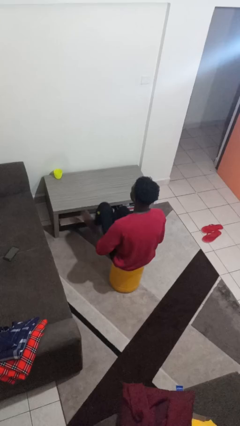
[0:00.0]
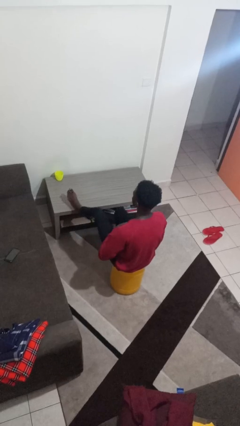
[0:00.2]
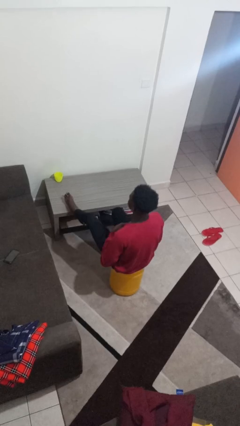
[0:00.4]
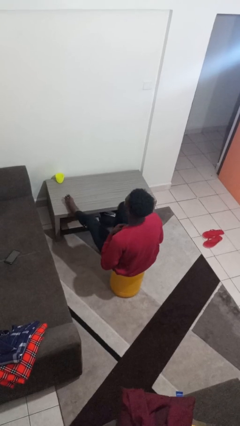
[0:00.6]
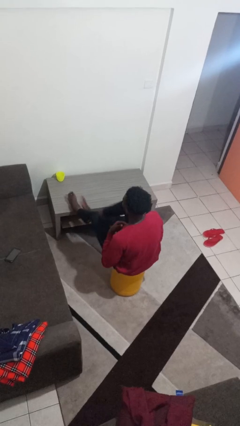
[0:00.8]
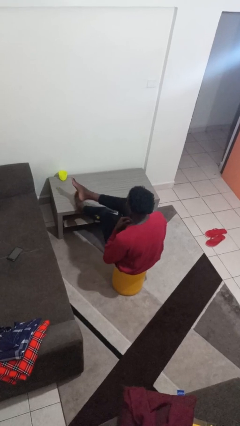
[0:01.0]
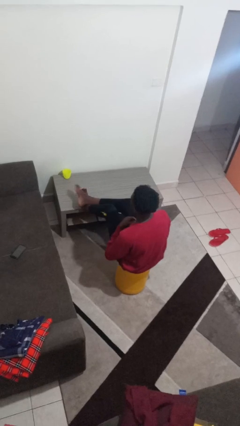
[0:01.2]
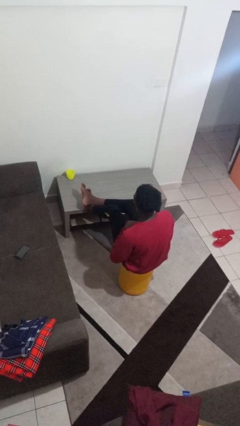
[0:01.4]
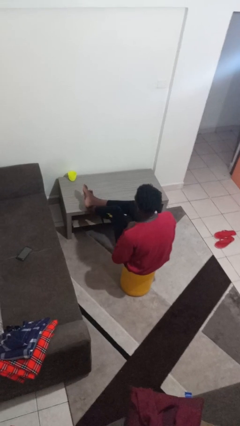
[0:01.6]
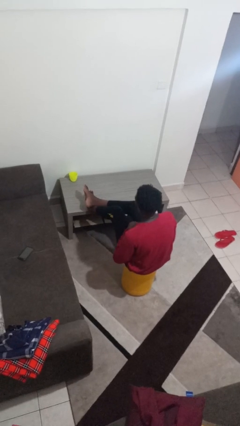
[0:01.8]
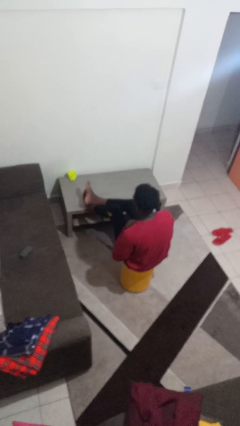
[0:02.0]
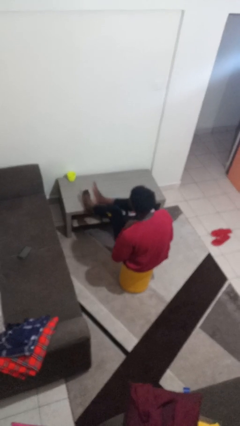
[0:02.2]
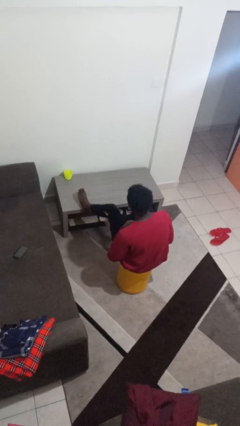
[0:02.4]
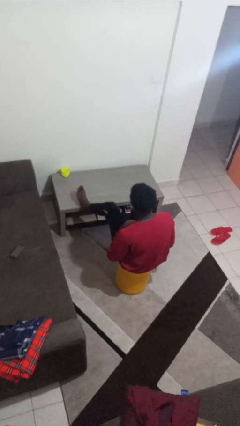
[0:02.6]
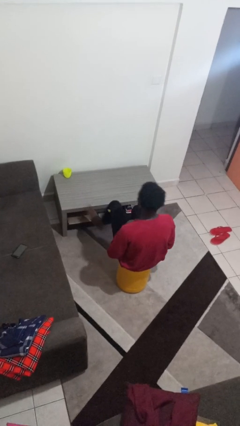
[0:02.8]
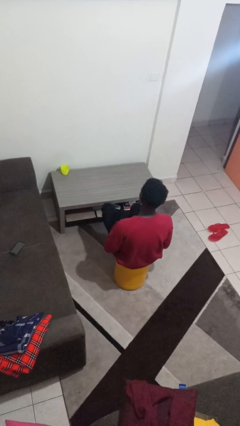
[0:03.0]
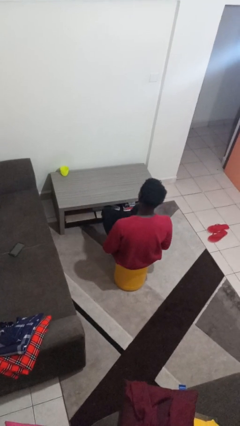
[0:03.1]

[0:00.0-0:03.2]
person puts feet up

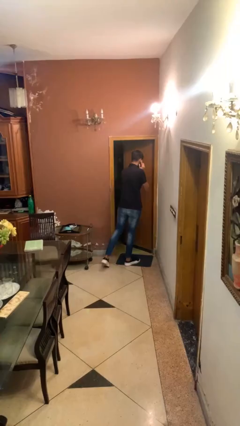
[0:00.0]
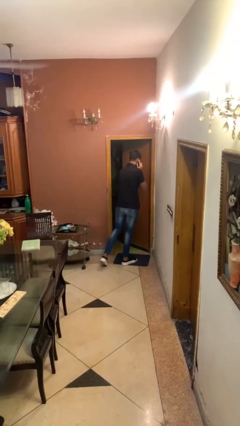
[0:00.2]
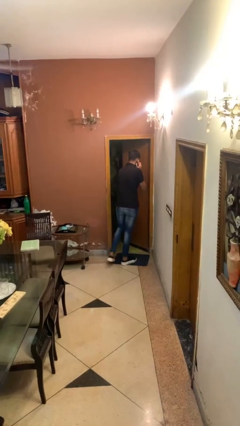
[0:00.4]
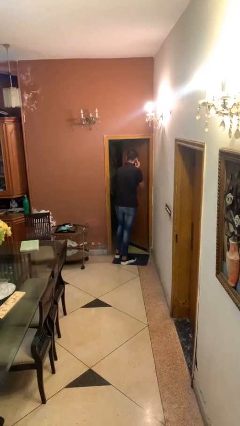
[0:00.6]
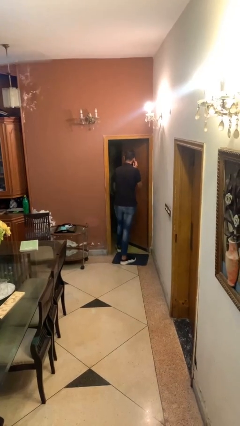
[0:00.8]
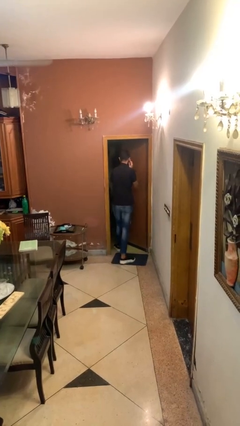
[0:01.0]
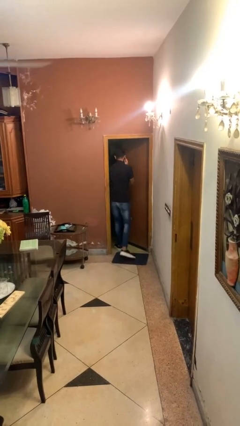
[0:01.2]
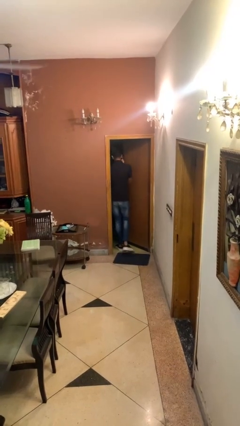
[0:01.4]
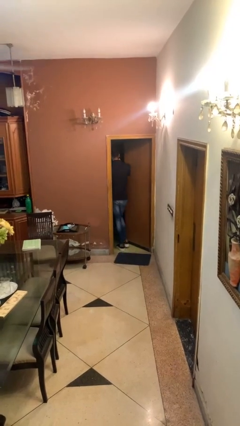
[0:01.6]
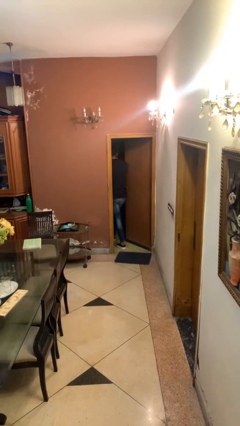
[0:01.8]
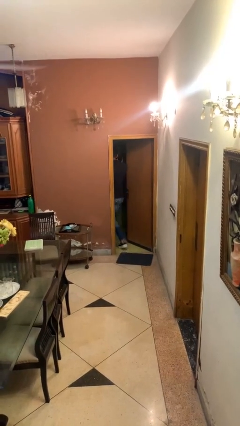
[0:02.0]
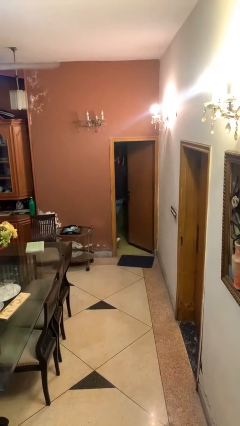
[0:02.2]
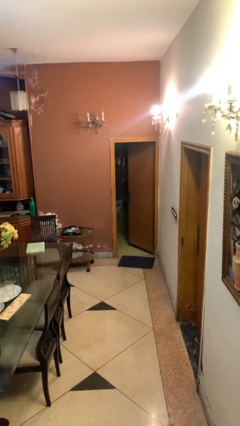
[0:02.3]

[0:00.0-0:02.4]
person exits scene through structure

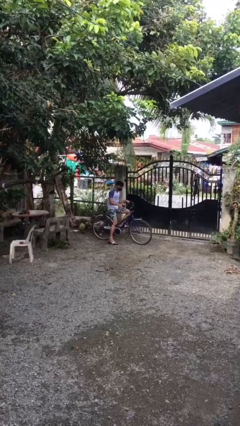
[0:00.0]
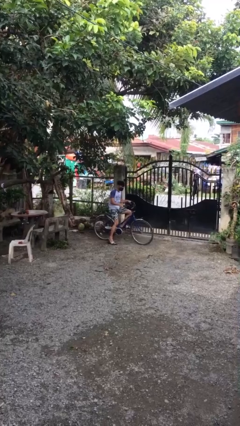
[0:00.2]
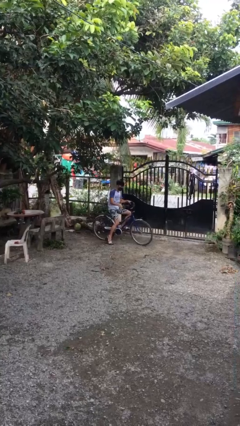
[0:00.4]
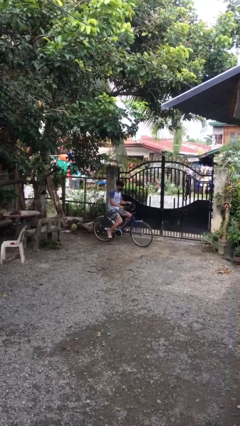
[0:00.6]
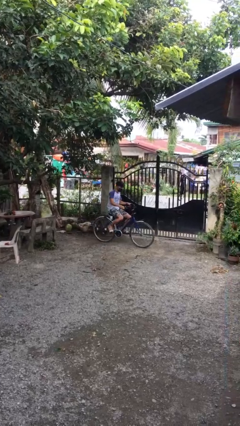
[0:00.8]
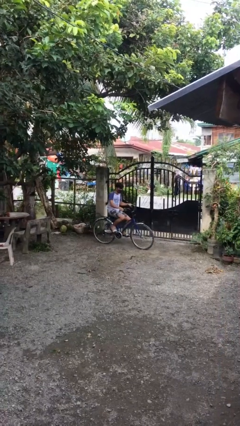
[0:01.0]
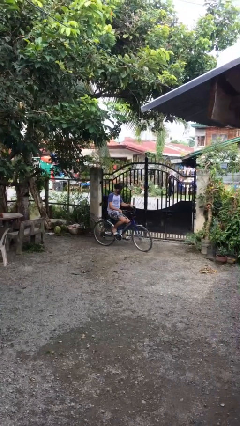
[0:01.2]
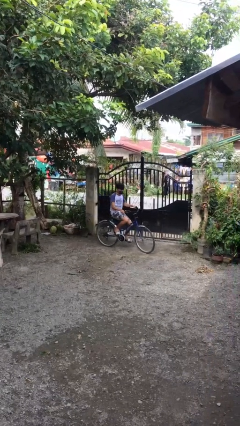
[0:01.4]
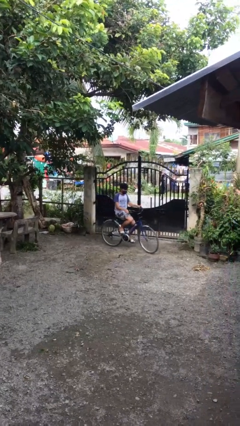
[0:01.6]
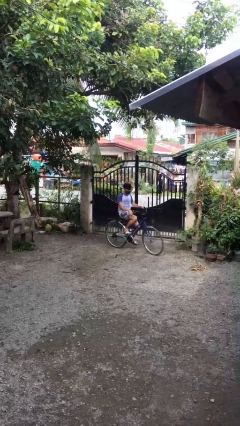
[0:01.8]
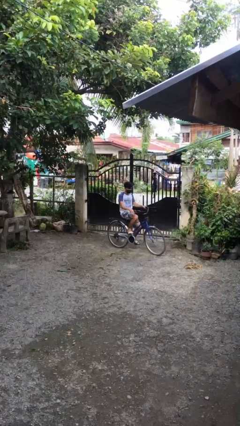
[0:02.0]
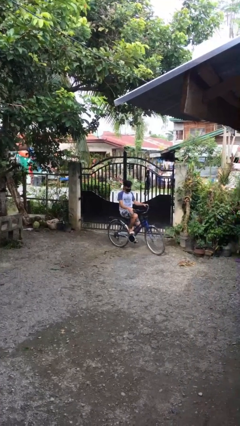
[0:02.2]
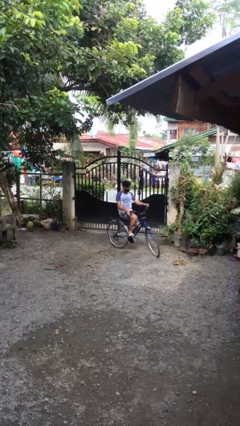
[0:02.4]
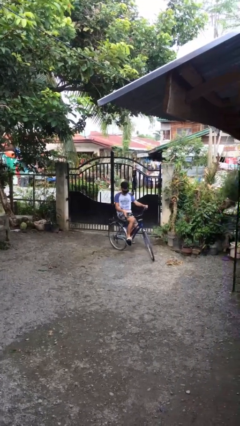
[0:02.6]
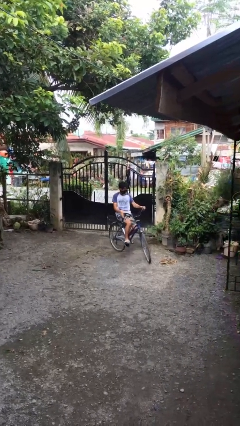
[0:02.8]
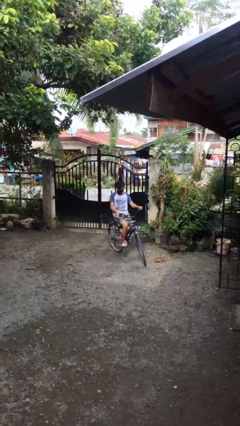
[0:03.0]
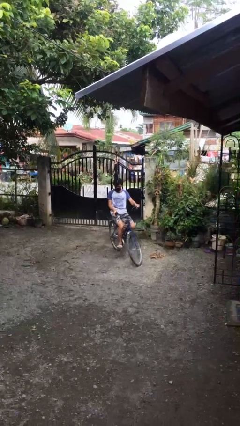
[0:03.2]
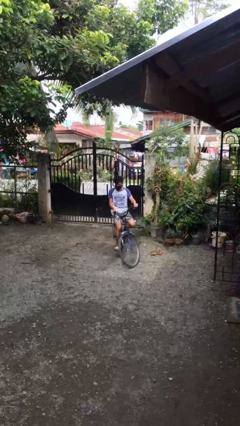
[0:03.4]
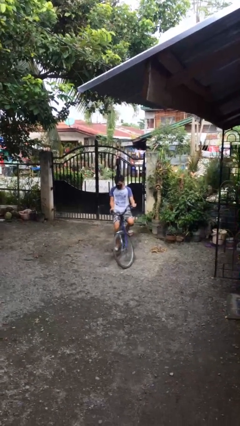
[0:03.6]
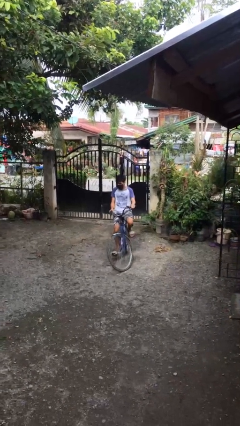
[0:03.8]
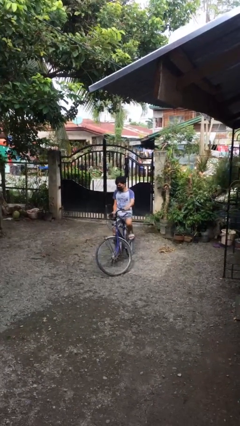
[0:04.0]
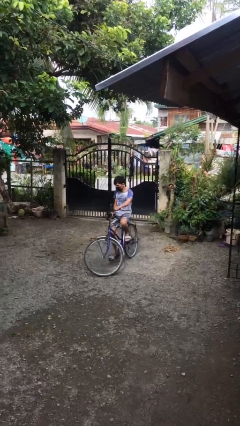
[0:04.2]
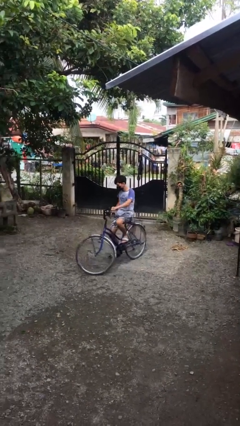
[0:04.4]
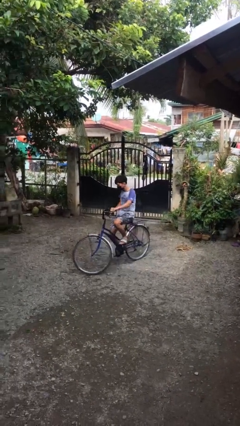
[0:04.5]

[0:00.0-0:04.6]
person rides bicycle

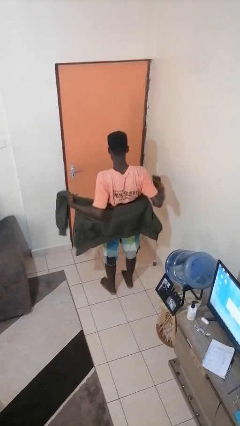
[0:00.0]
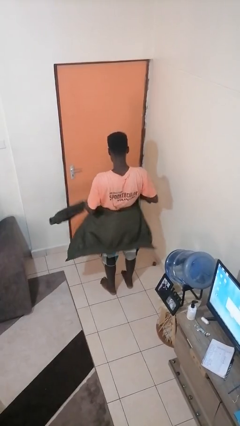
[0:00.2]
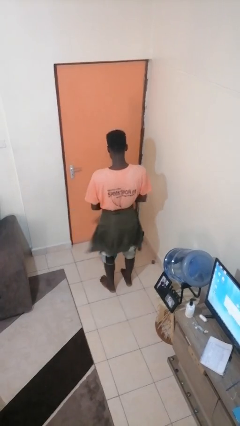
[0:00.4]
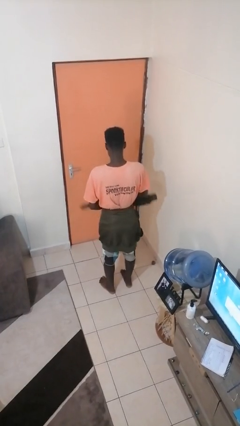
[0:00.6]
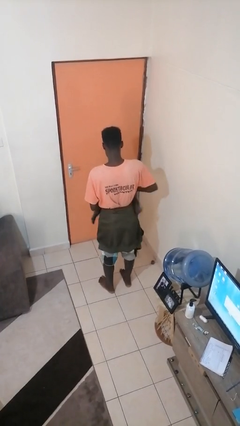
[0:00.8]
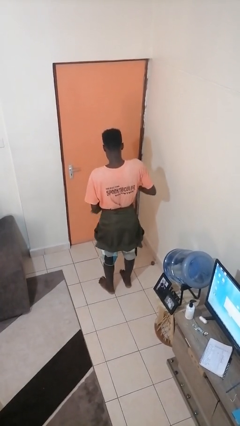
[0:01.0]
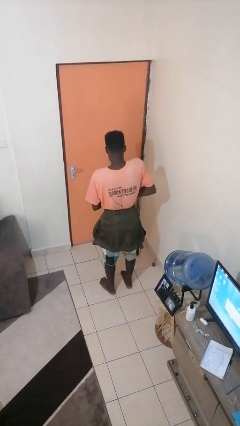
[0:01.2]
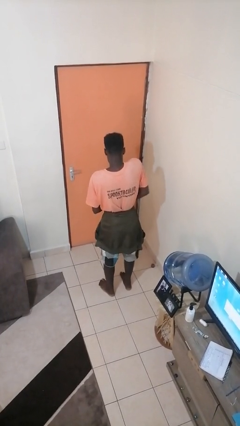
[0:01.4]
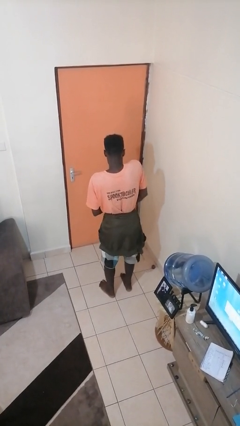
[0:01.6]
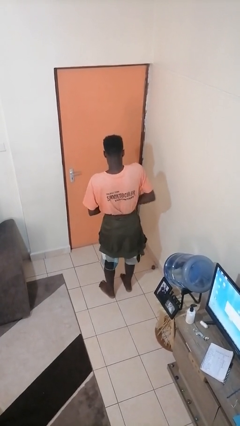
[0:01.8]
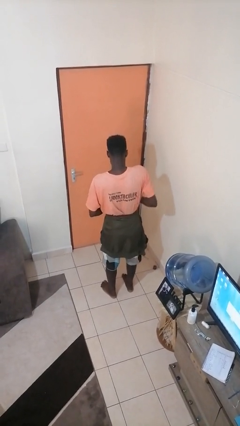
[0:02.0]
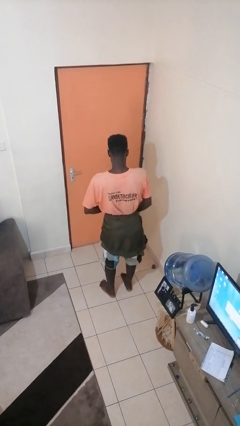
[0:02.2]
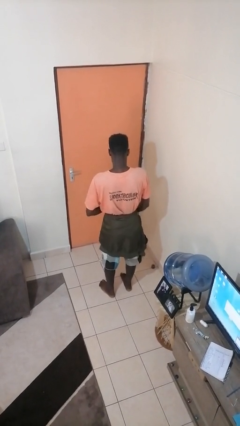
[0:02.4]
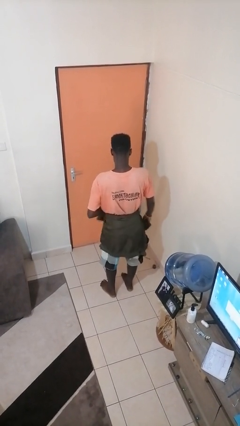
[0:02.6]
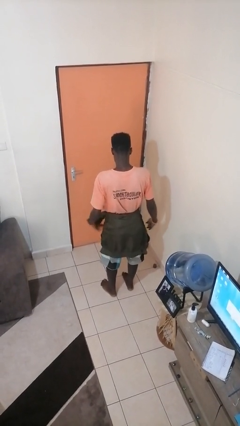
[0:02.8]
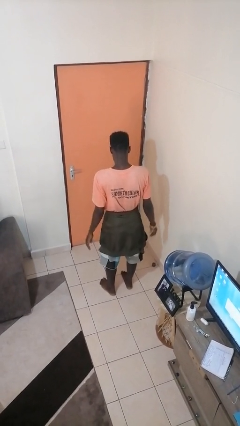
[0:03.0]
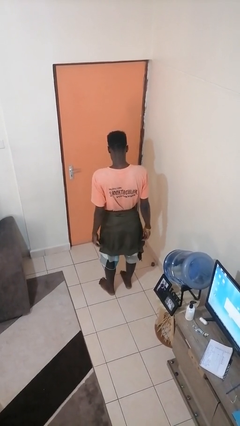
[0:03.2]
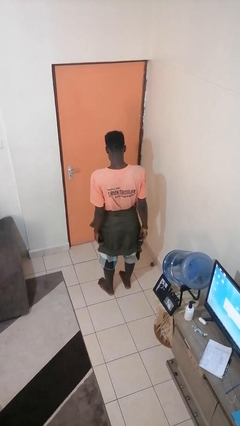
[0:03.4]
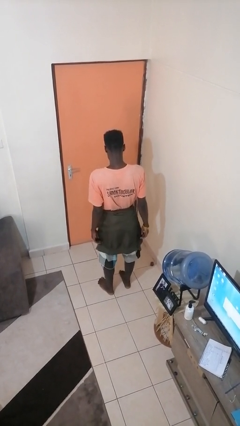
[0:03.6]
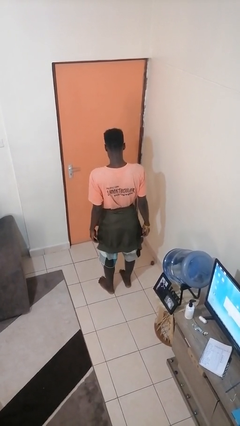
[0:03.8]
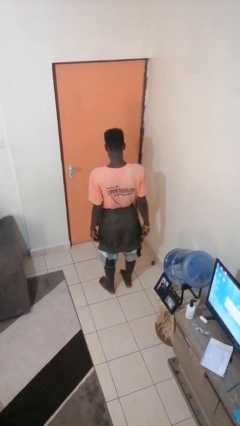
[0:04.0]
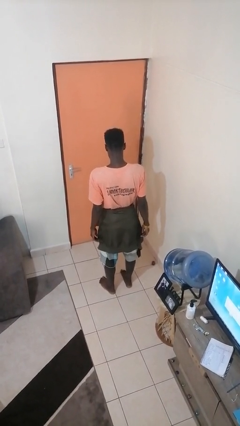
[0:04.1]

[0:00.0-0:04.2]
person ties jacket around waist

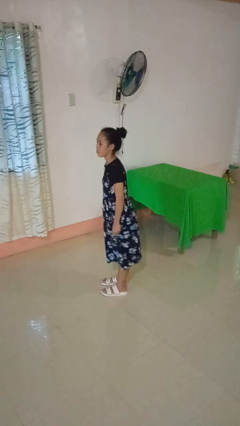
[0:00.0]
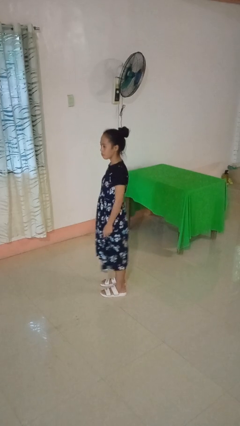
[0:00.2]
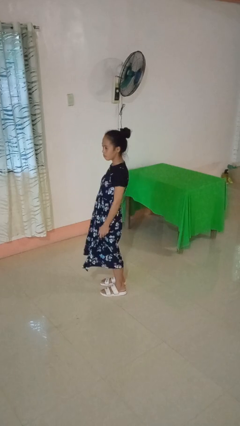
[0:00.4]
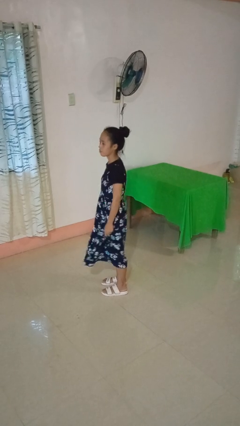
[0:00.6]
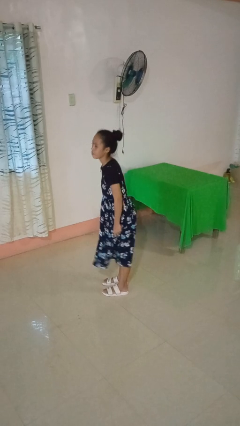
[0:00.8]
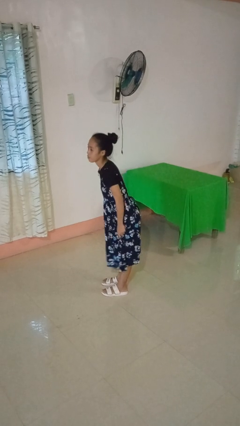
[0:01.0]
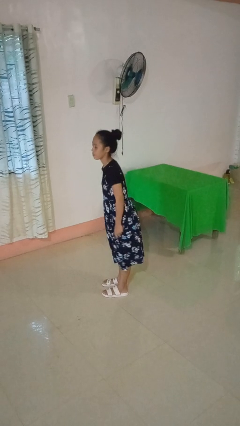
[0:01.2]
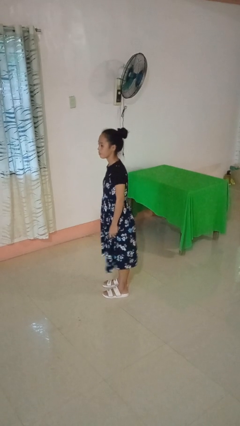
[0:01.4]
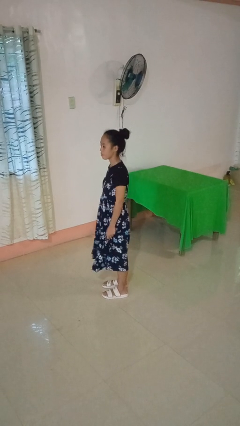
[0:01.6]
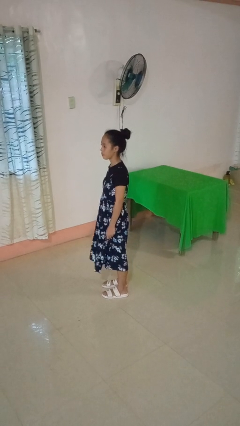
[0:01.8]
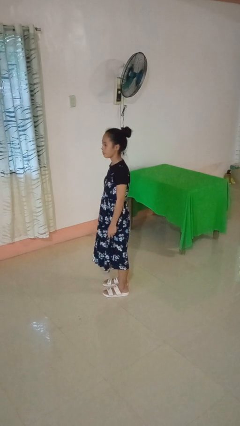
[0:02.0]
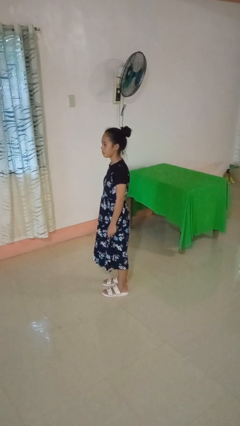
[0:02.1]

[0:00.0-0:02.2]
person wiggles hips

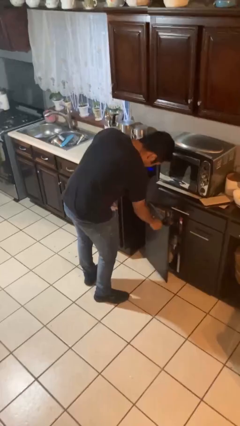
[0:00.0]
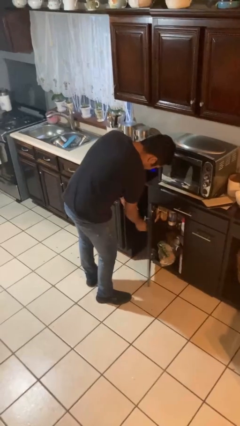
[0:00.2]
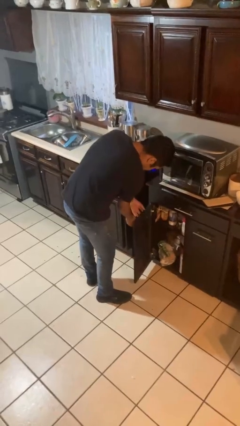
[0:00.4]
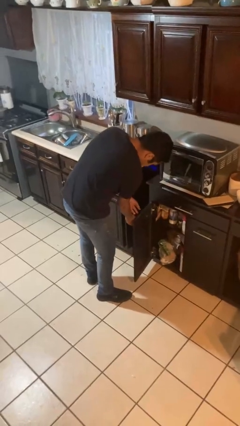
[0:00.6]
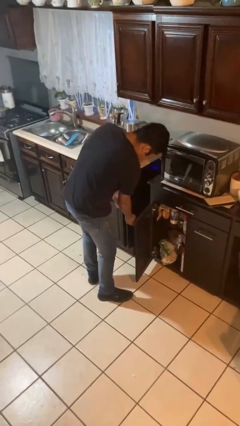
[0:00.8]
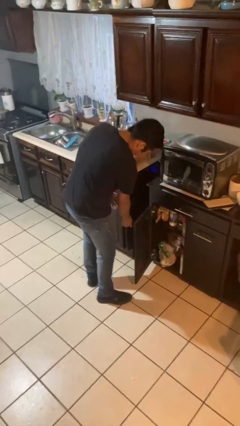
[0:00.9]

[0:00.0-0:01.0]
person opens cabinet
